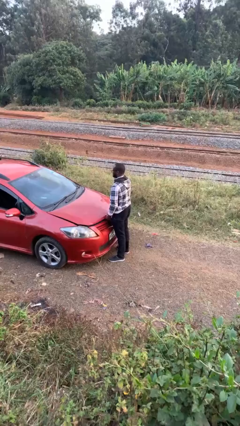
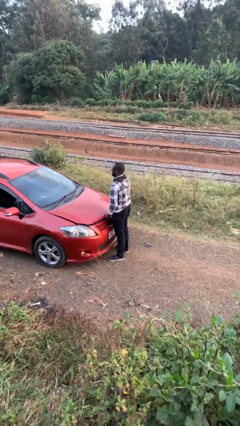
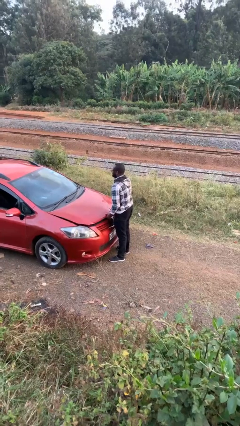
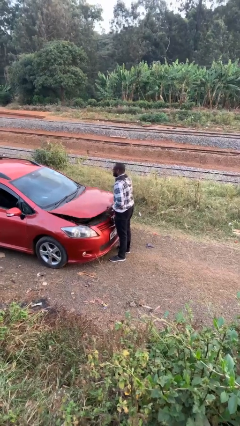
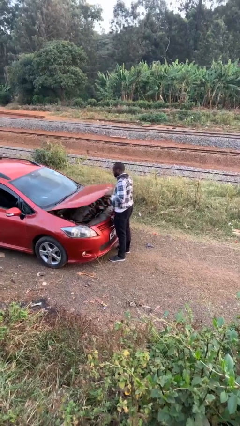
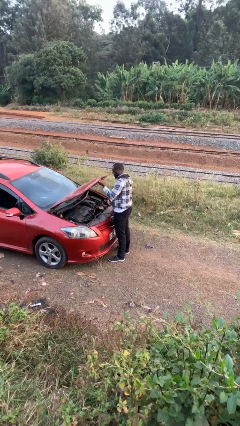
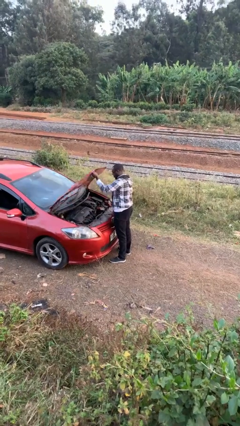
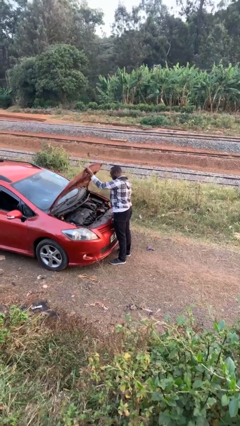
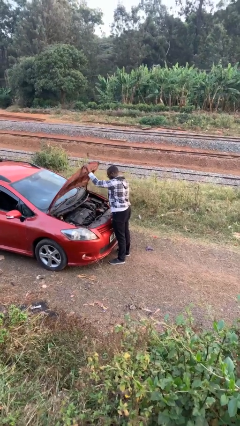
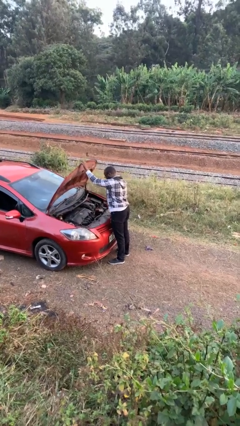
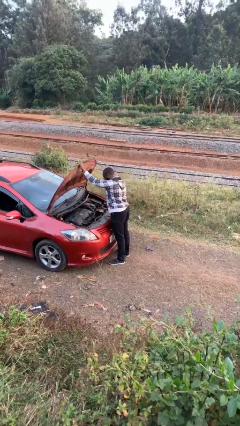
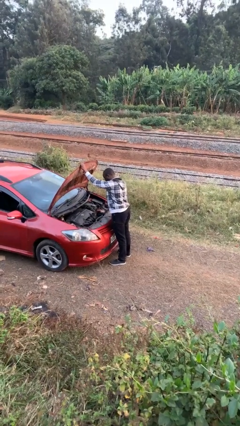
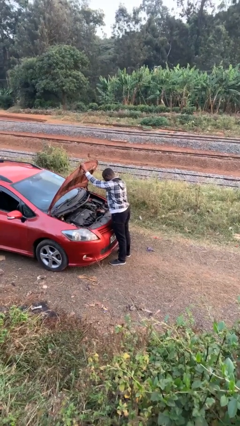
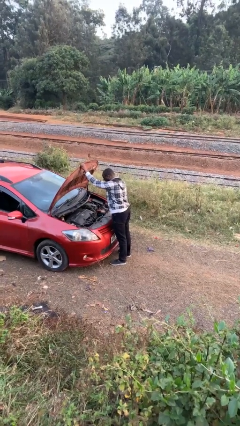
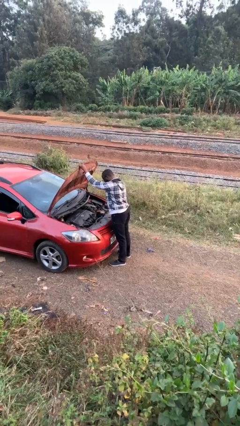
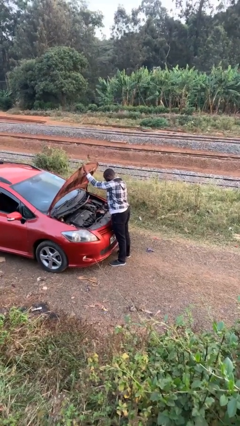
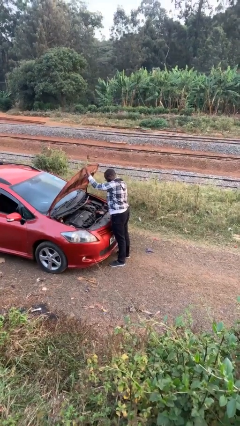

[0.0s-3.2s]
person opens car hood

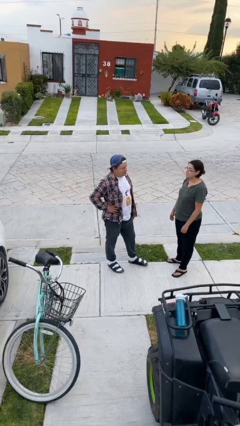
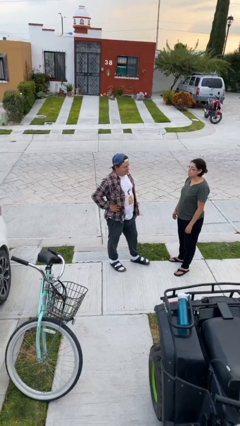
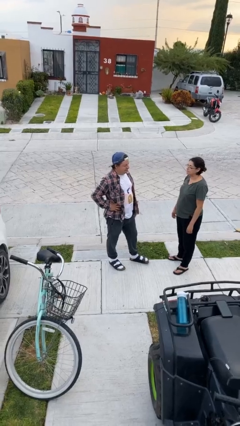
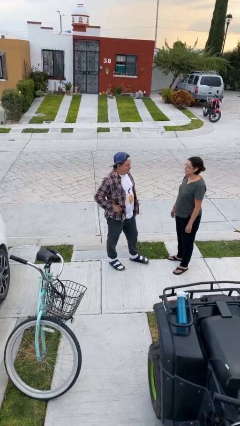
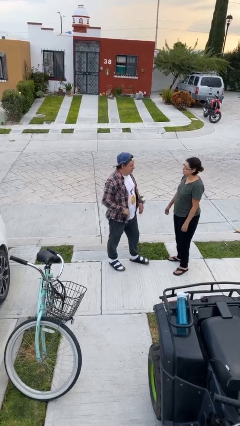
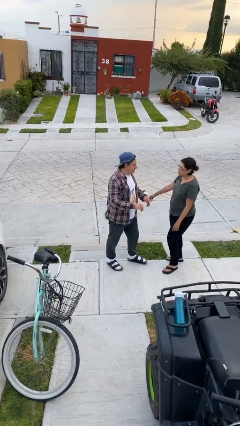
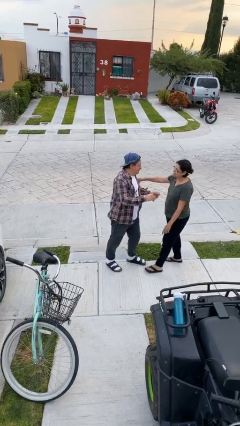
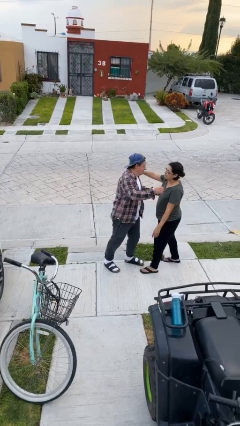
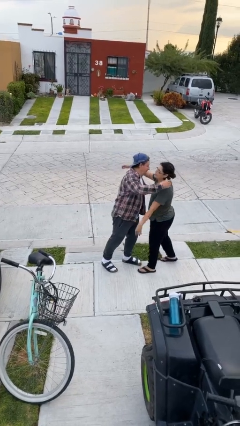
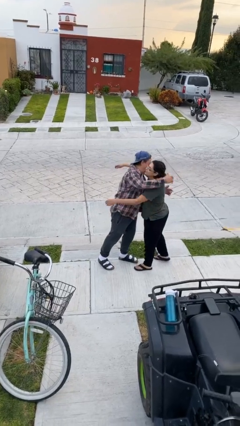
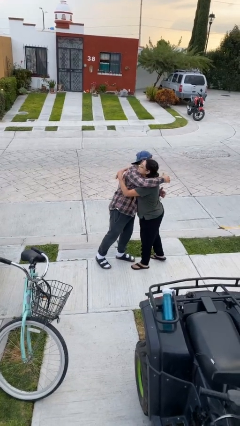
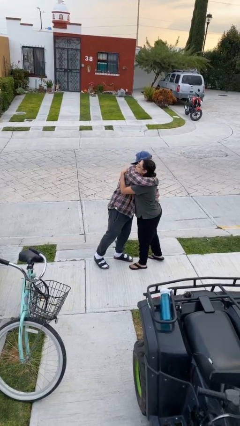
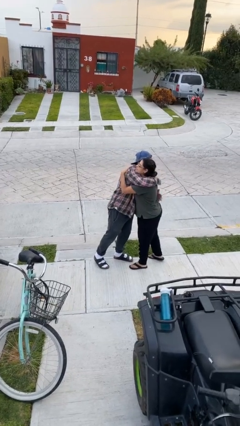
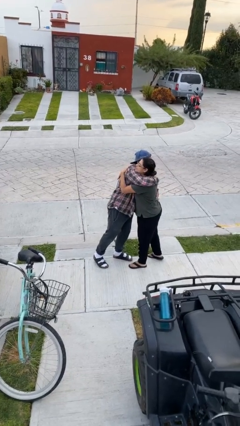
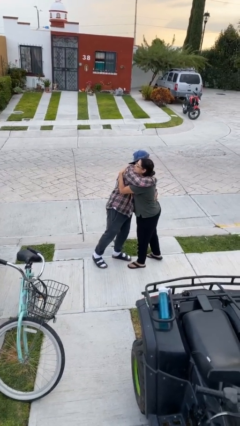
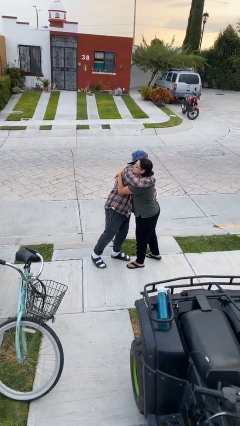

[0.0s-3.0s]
person embraces person

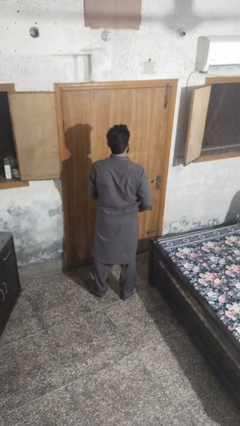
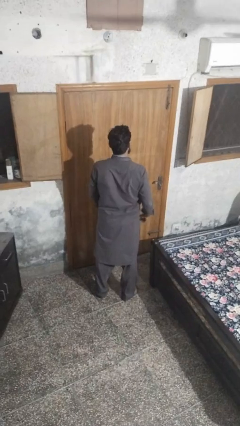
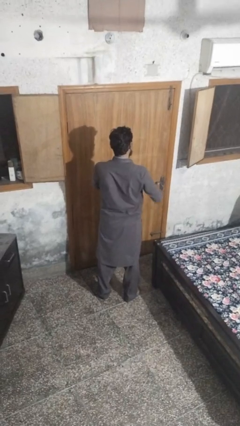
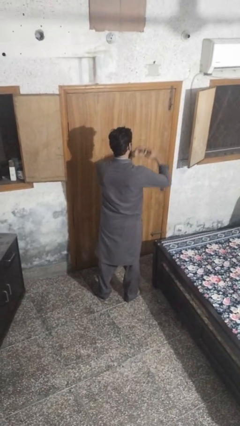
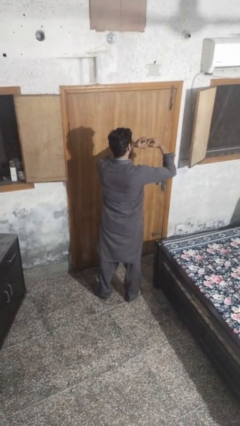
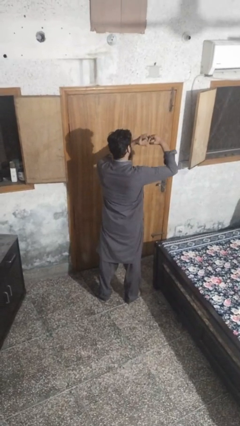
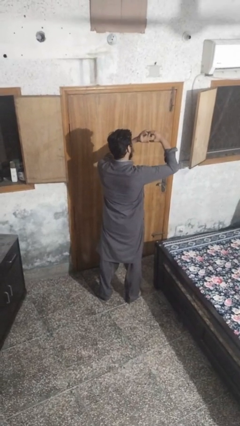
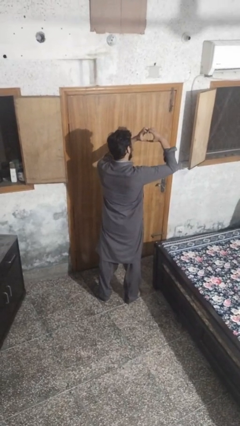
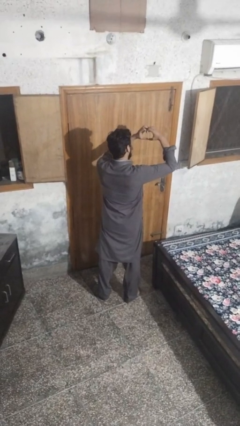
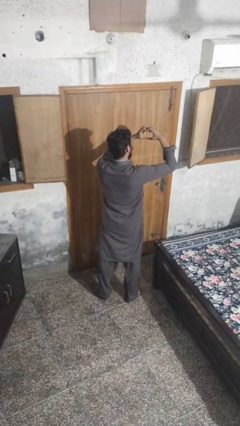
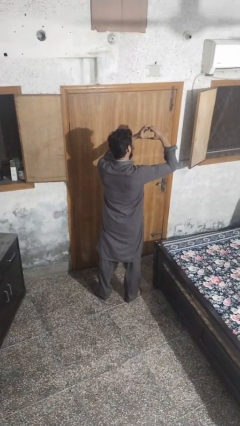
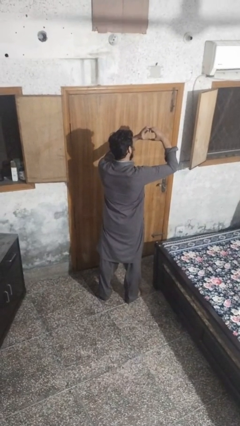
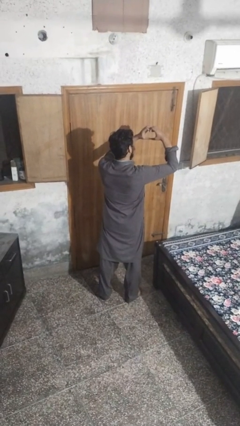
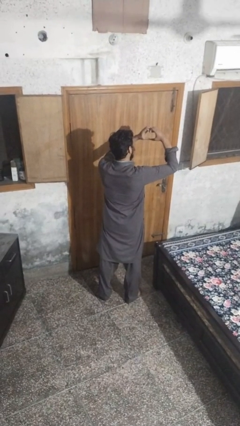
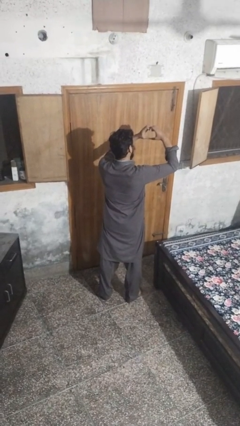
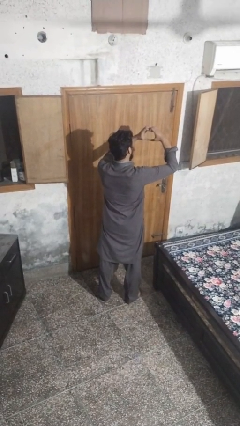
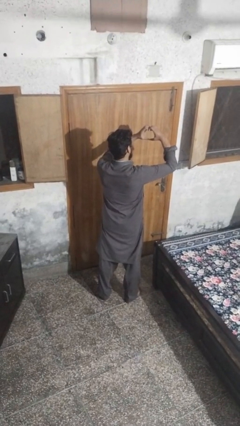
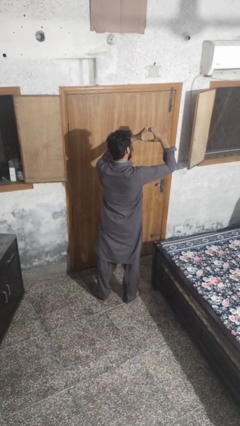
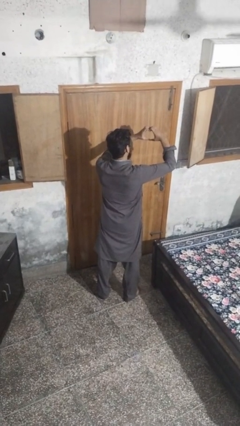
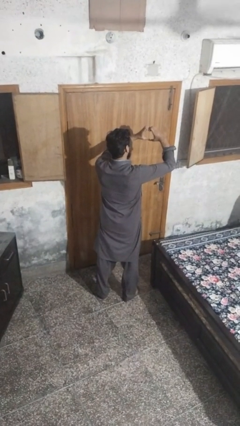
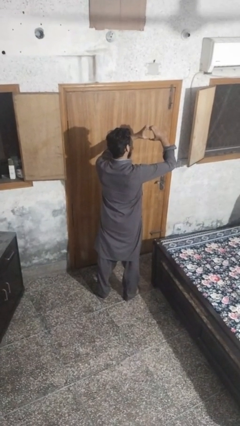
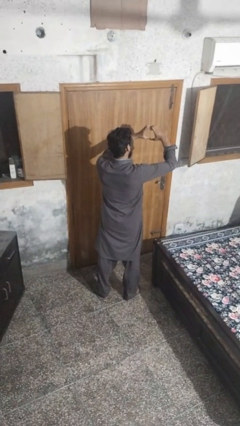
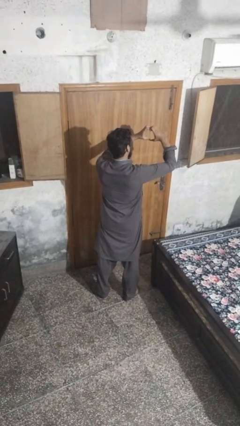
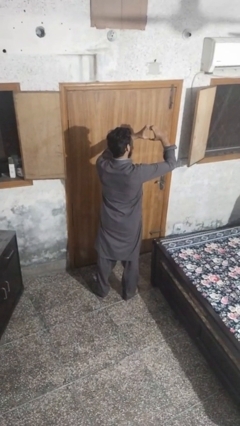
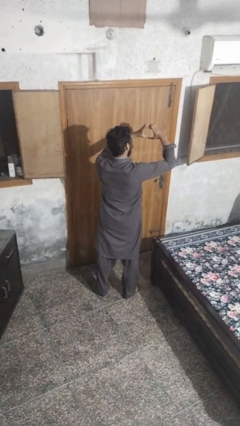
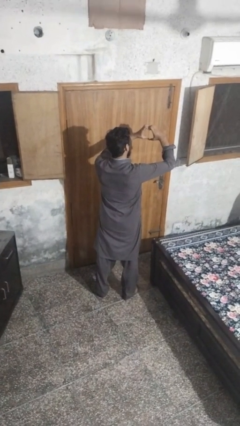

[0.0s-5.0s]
person gestures heart

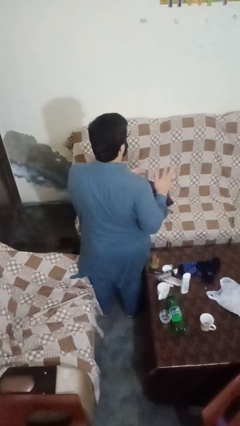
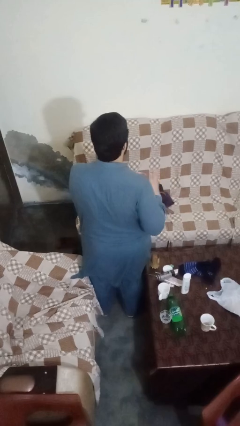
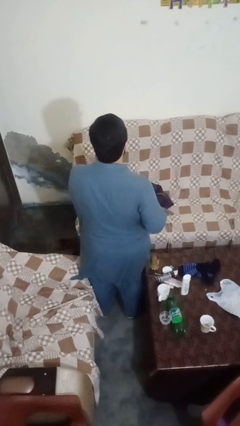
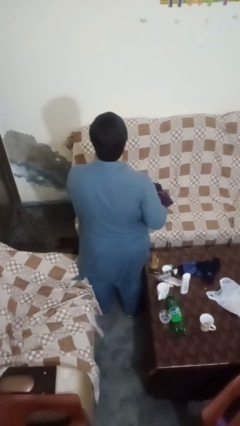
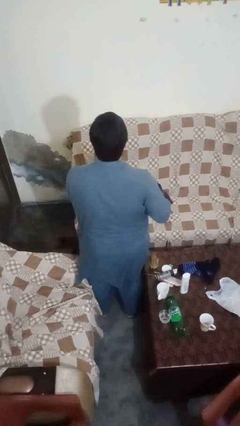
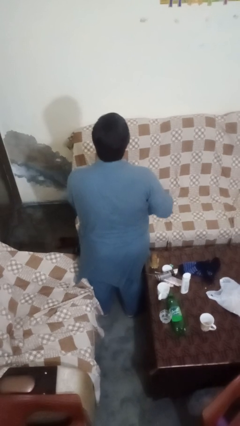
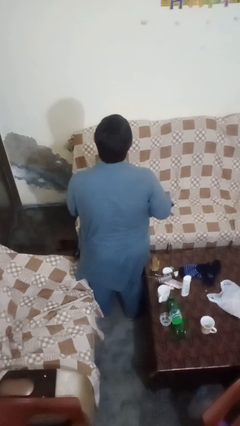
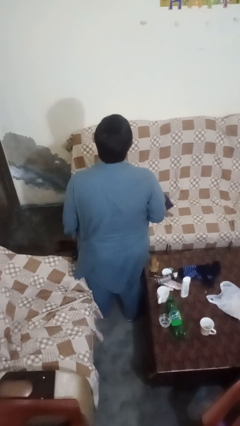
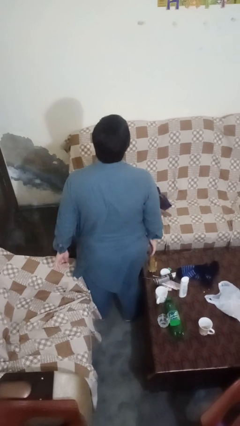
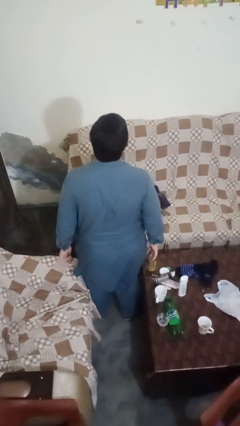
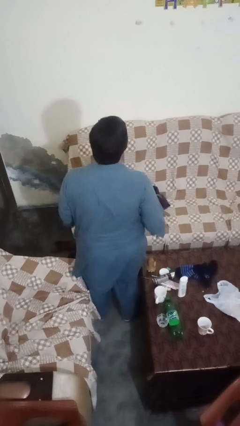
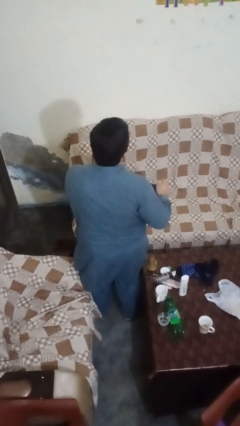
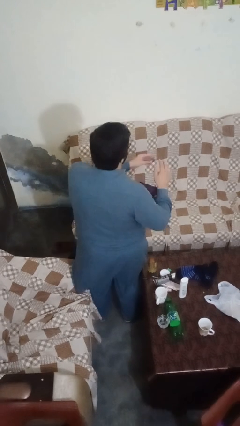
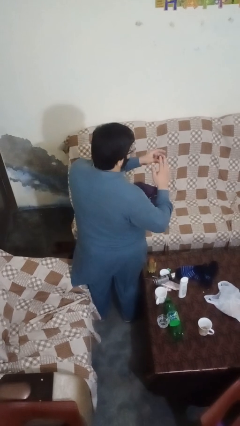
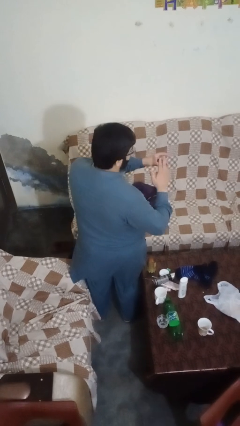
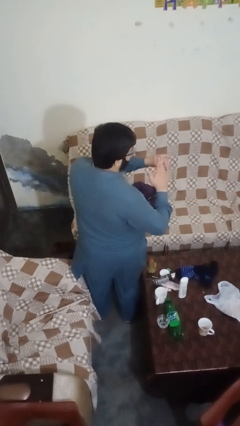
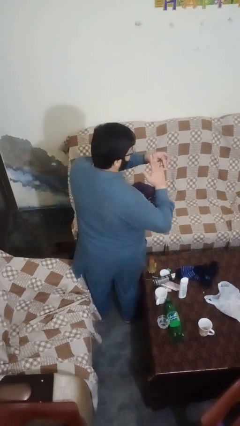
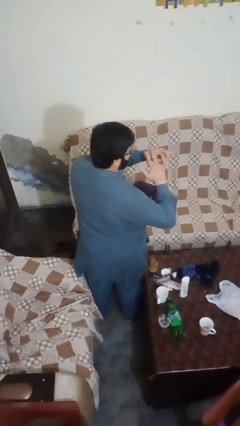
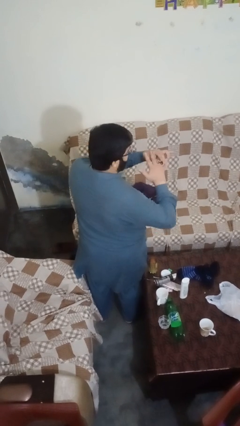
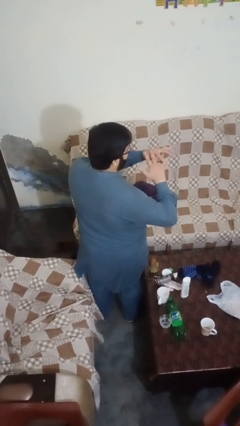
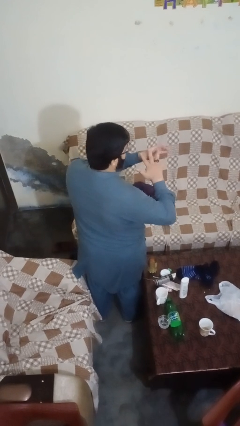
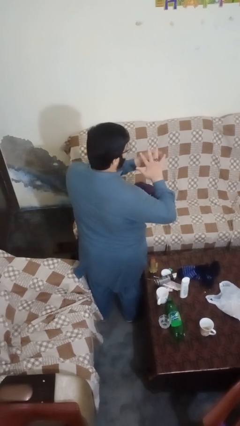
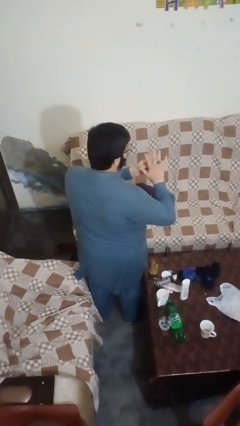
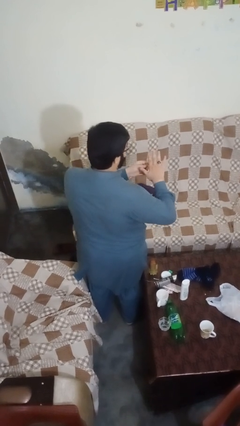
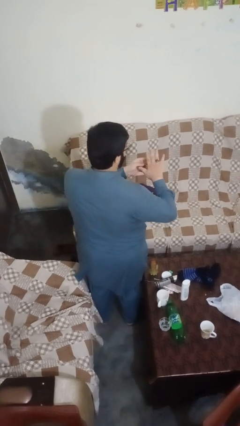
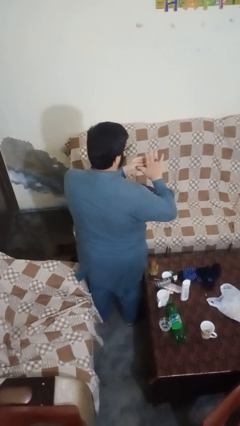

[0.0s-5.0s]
person puts on ring

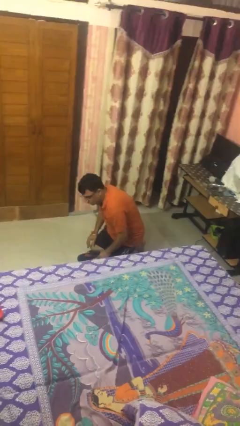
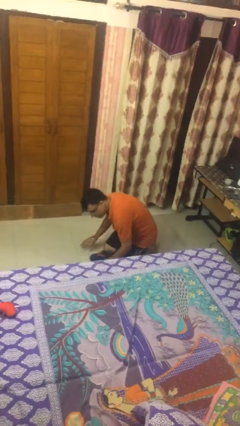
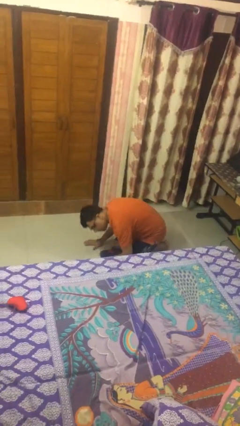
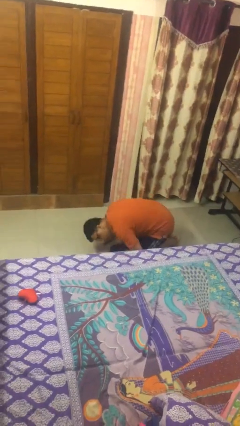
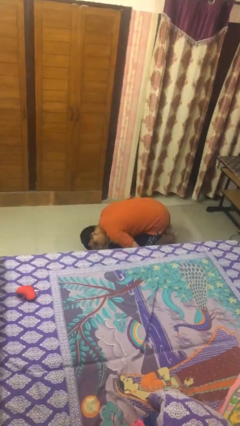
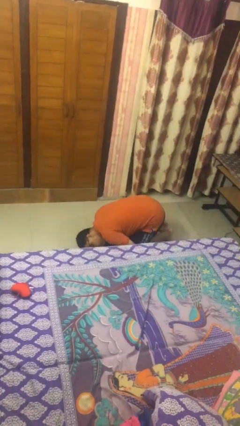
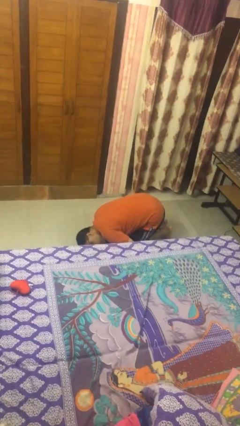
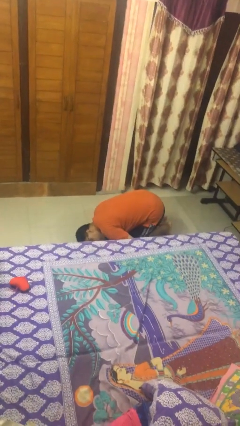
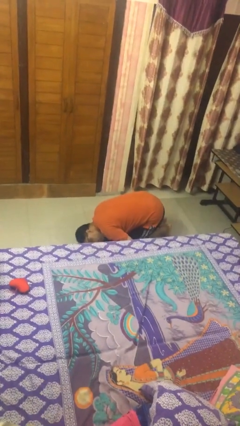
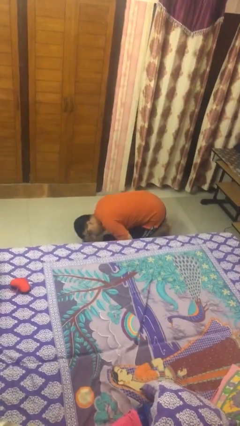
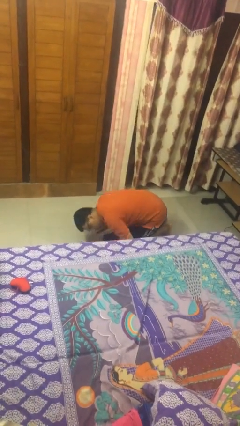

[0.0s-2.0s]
person searches under bed
